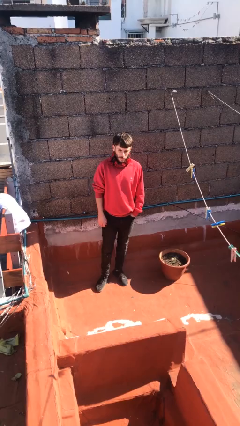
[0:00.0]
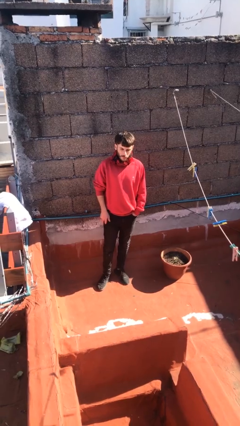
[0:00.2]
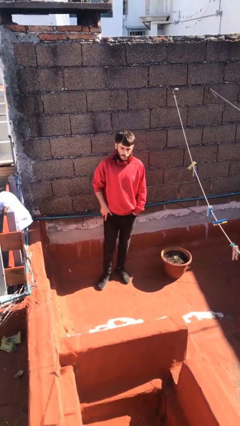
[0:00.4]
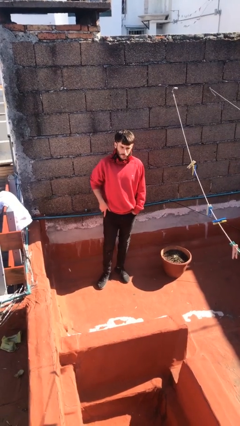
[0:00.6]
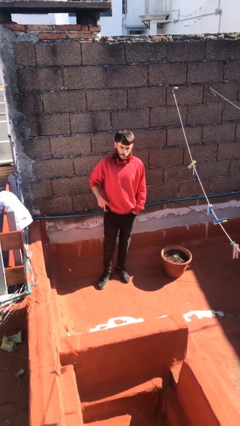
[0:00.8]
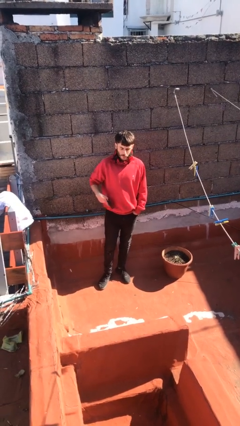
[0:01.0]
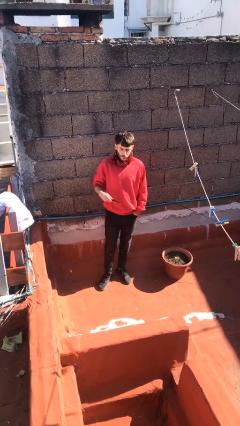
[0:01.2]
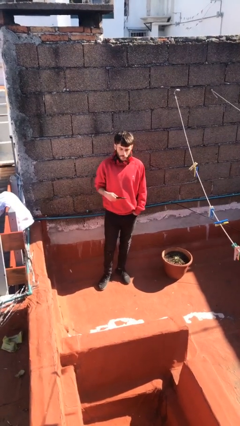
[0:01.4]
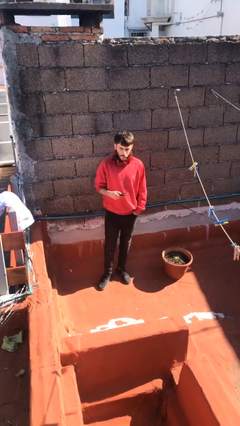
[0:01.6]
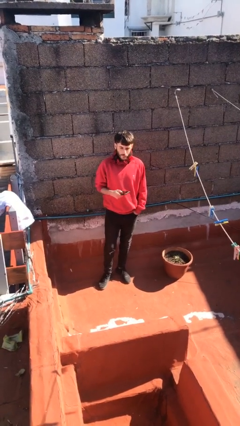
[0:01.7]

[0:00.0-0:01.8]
person takes phone from pocket

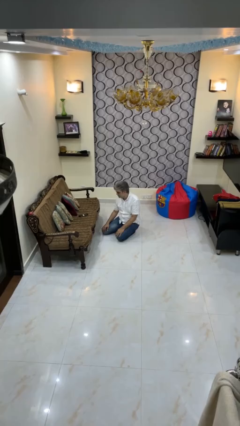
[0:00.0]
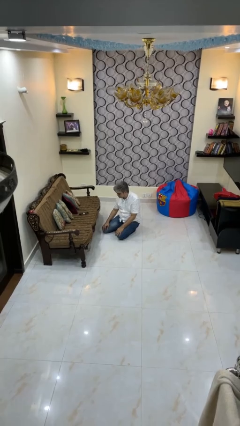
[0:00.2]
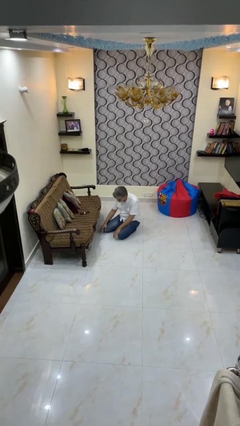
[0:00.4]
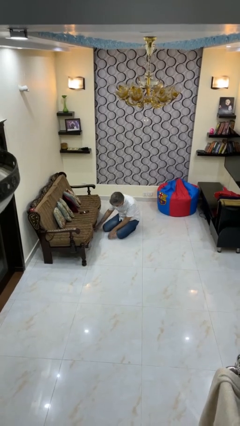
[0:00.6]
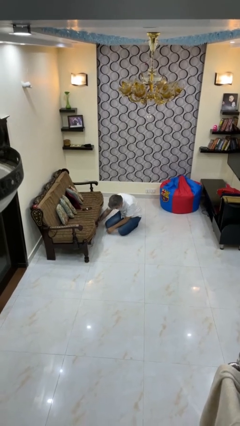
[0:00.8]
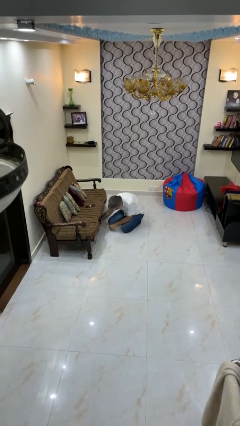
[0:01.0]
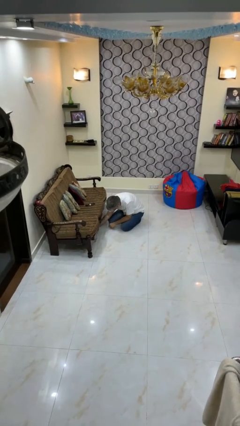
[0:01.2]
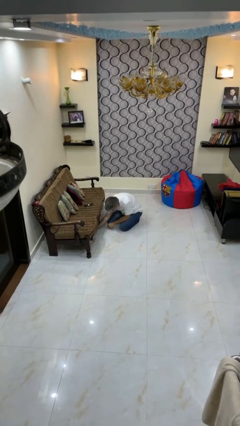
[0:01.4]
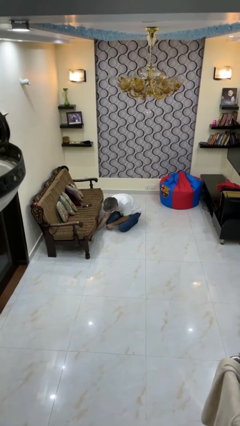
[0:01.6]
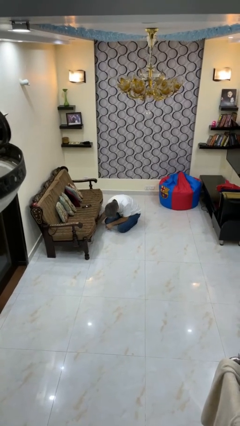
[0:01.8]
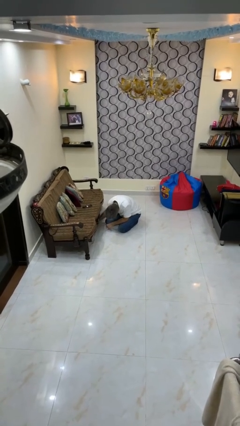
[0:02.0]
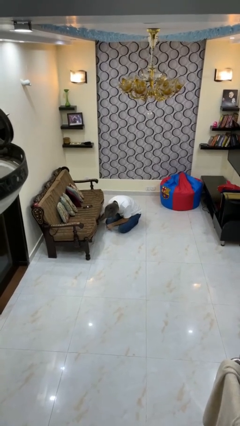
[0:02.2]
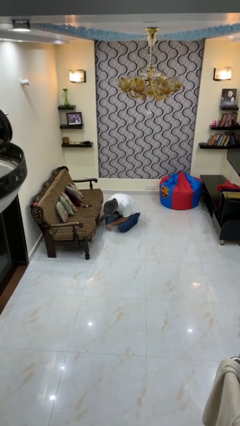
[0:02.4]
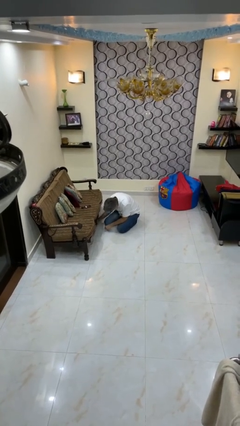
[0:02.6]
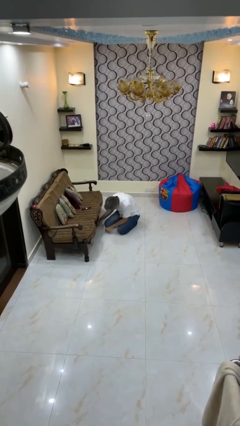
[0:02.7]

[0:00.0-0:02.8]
person searches under couch

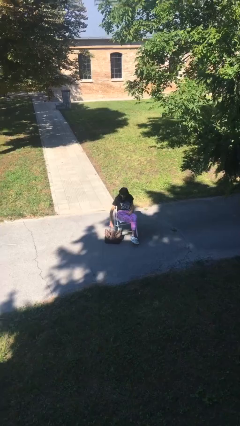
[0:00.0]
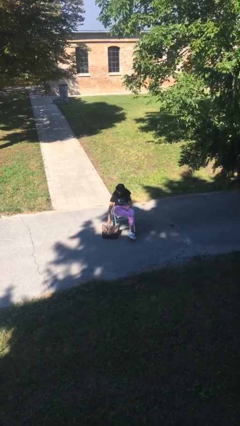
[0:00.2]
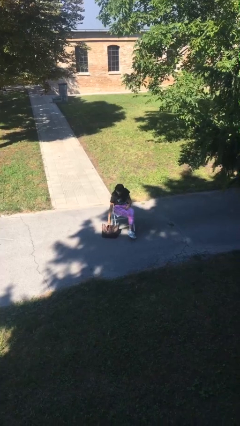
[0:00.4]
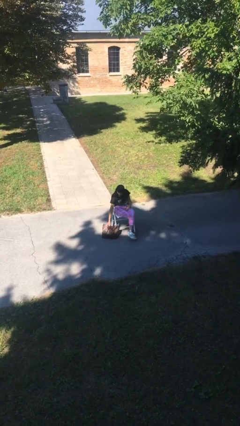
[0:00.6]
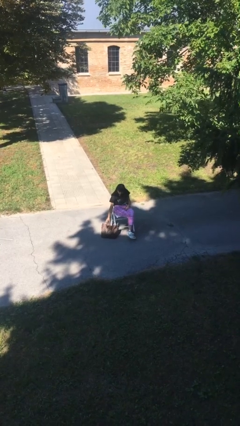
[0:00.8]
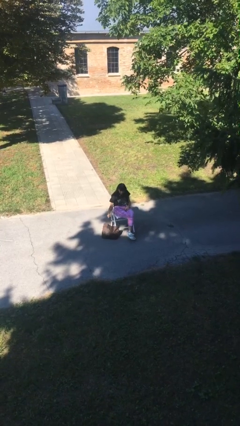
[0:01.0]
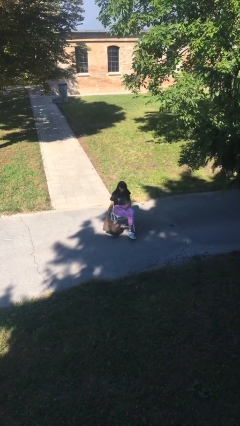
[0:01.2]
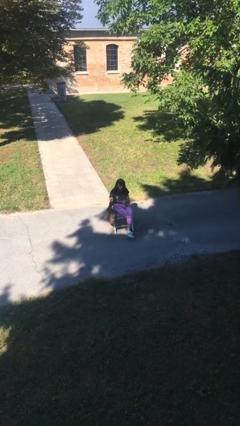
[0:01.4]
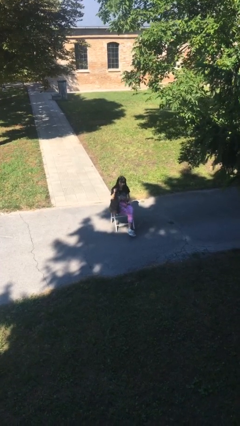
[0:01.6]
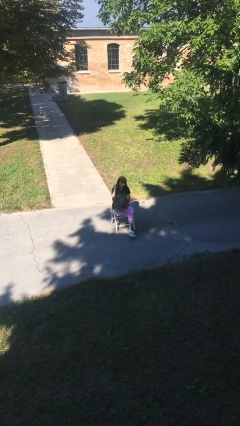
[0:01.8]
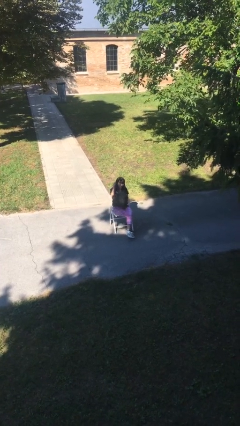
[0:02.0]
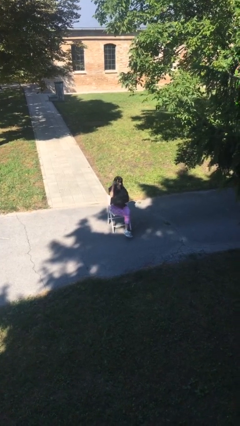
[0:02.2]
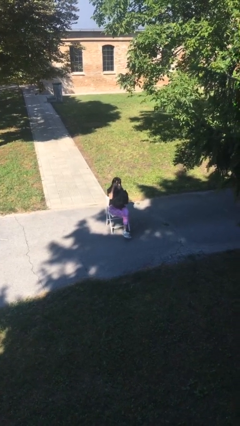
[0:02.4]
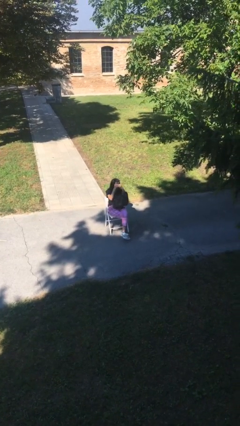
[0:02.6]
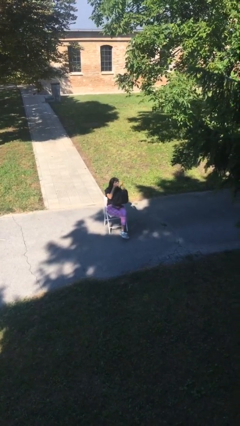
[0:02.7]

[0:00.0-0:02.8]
person picks up object from floor

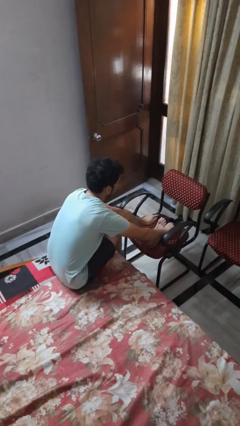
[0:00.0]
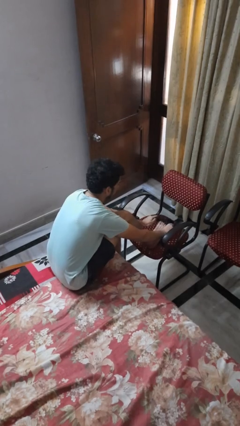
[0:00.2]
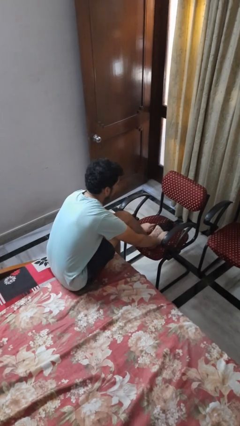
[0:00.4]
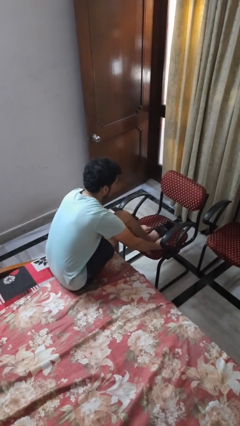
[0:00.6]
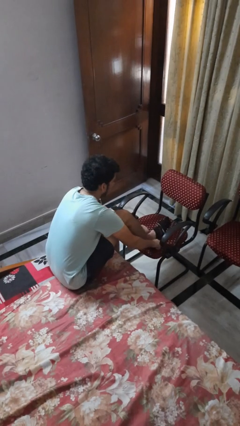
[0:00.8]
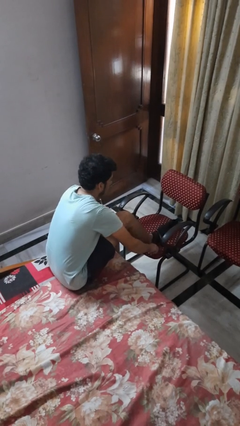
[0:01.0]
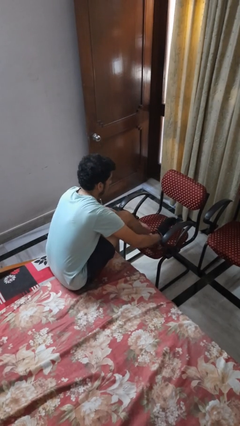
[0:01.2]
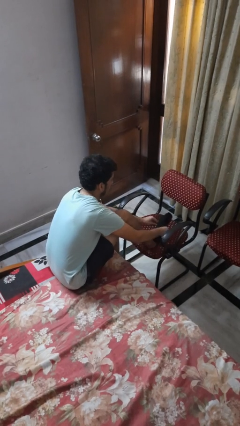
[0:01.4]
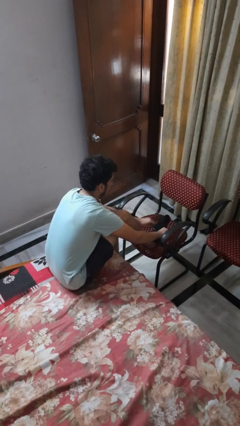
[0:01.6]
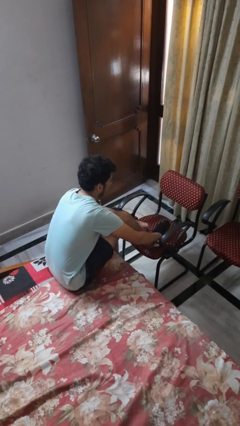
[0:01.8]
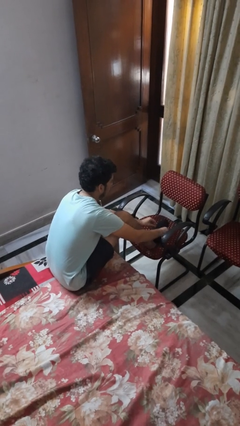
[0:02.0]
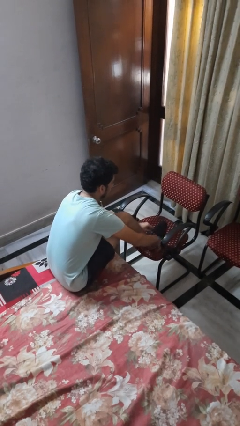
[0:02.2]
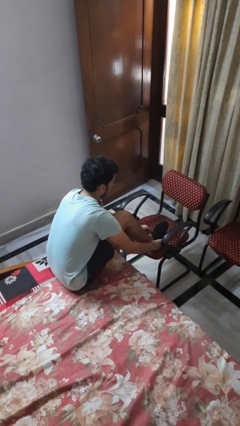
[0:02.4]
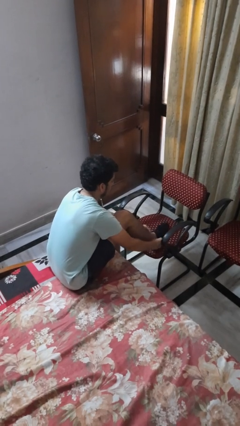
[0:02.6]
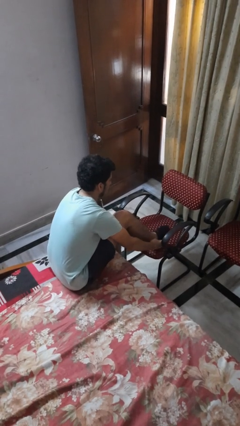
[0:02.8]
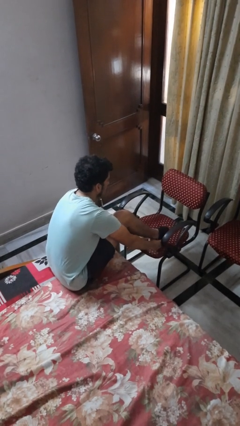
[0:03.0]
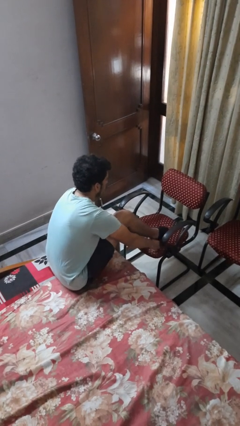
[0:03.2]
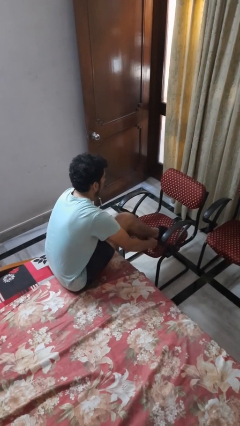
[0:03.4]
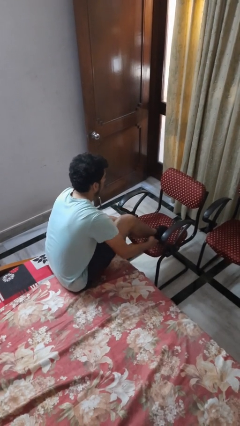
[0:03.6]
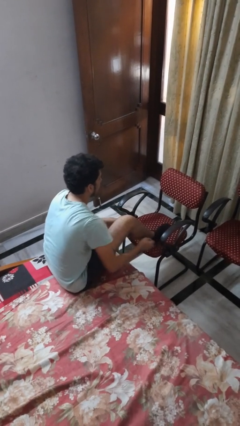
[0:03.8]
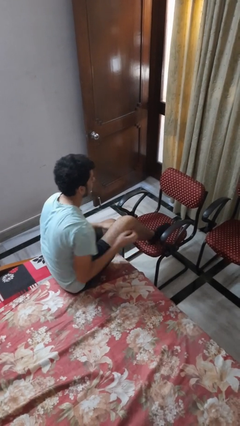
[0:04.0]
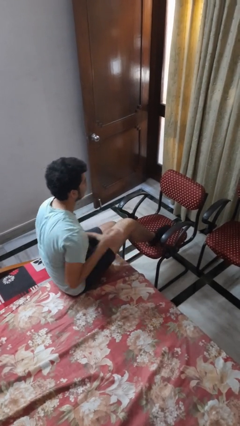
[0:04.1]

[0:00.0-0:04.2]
person puts on socks

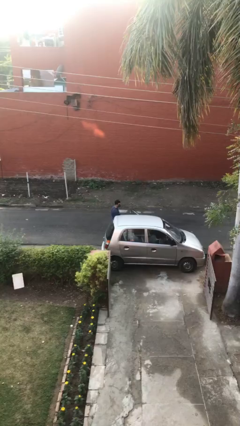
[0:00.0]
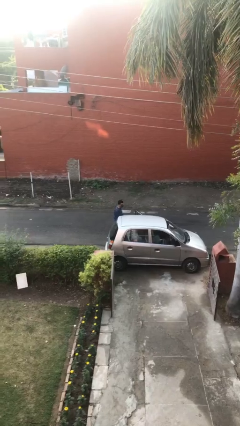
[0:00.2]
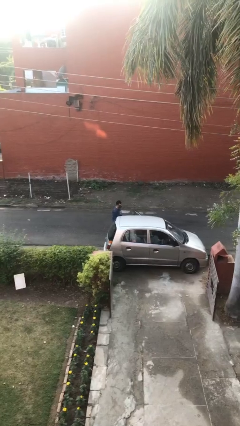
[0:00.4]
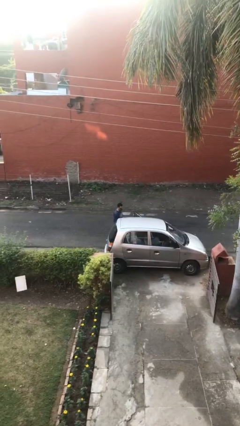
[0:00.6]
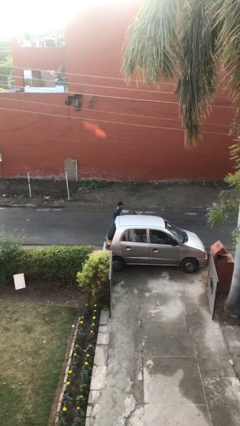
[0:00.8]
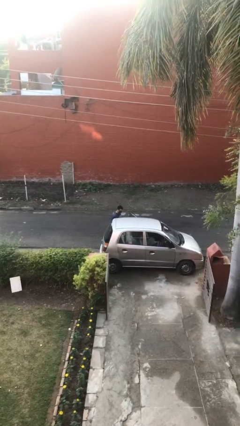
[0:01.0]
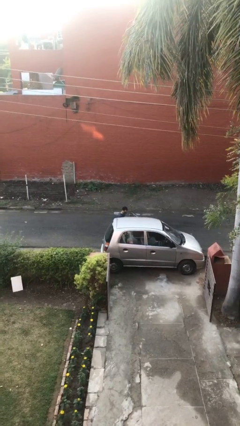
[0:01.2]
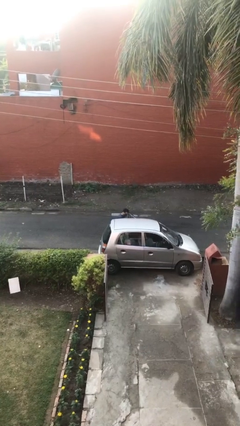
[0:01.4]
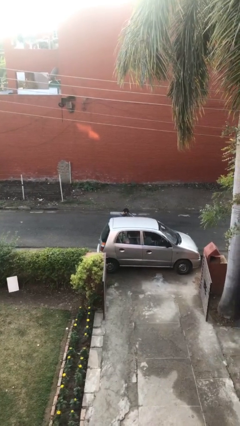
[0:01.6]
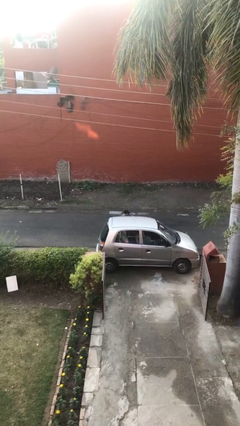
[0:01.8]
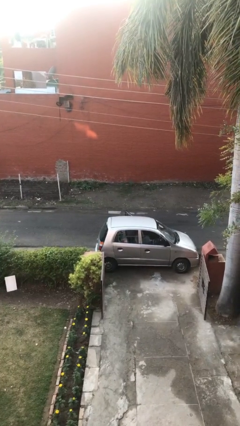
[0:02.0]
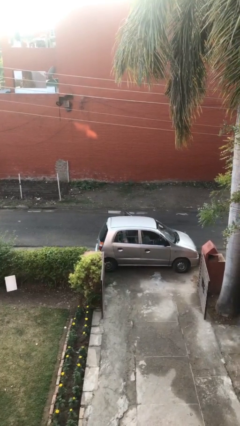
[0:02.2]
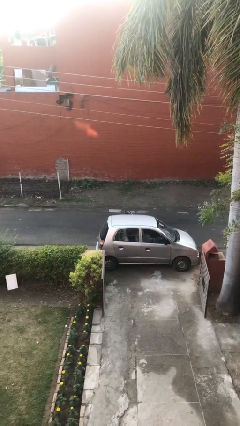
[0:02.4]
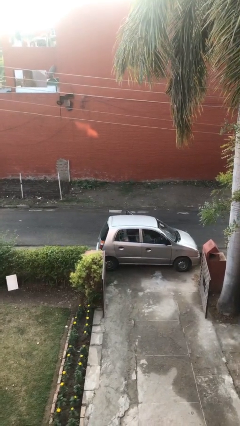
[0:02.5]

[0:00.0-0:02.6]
person enters car

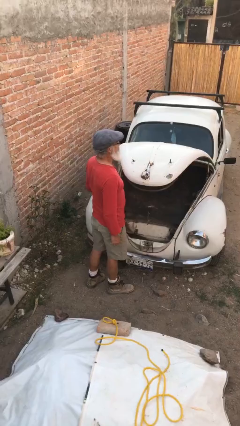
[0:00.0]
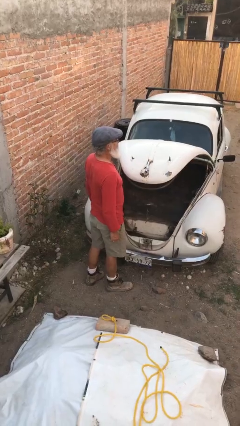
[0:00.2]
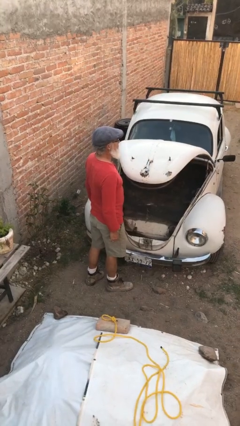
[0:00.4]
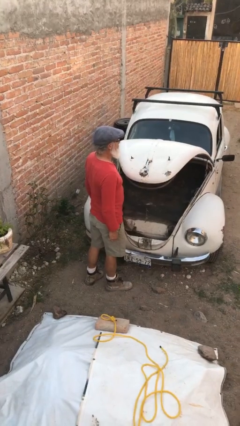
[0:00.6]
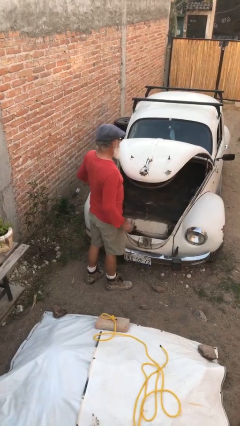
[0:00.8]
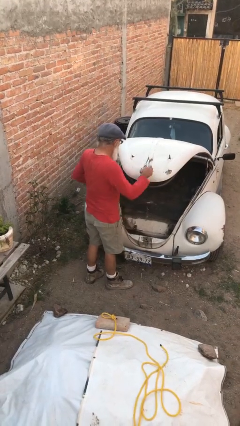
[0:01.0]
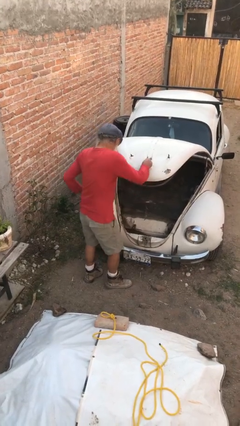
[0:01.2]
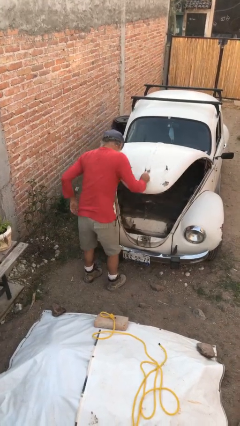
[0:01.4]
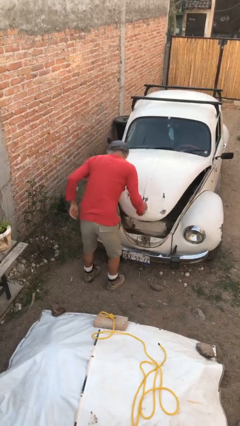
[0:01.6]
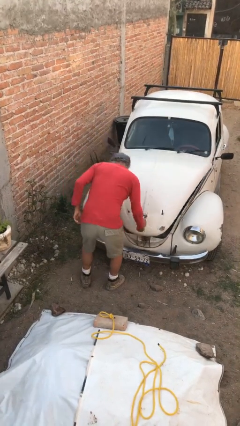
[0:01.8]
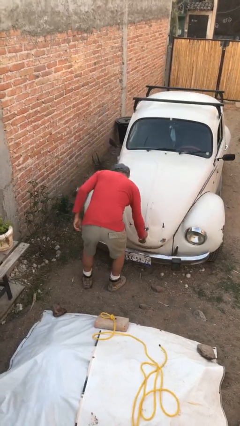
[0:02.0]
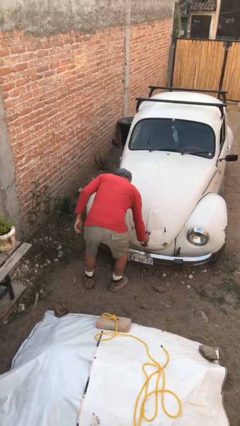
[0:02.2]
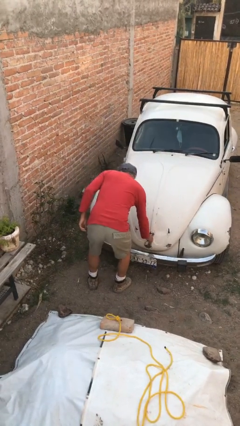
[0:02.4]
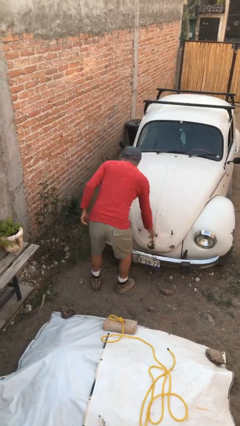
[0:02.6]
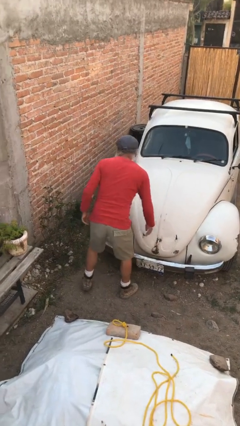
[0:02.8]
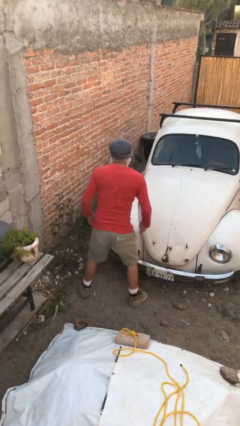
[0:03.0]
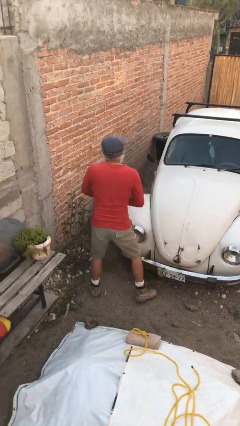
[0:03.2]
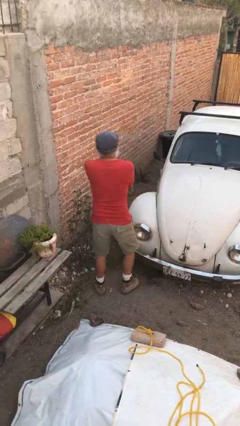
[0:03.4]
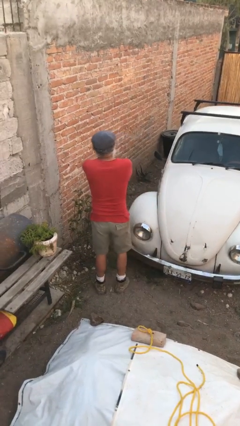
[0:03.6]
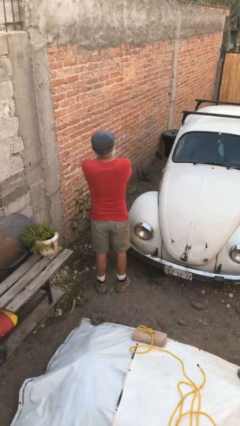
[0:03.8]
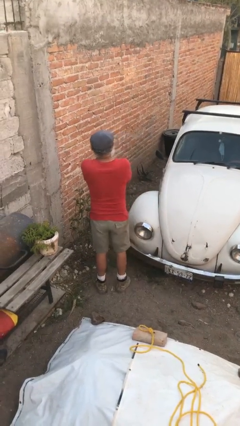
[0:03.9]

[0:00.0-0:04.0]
person closes car trunk
